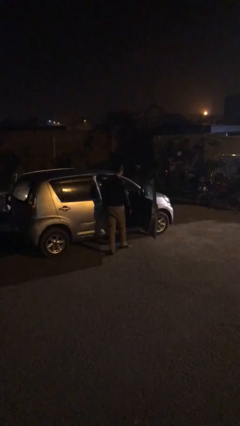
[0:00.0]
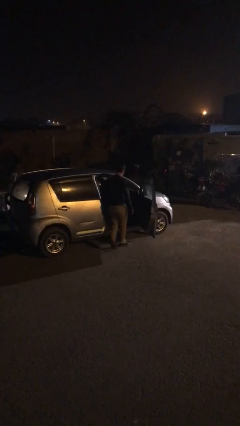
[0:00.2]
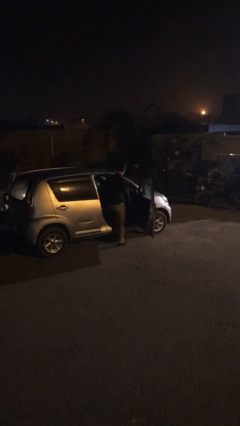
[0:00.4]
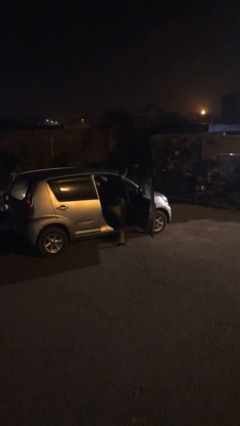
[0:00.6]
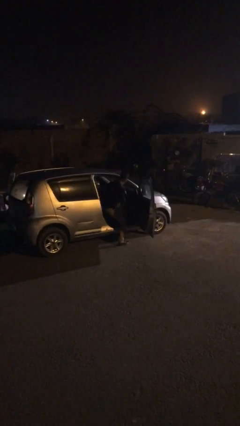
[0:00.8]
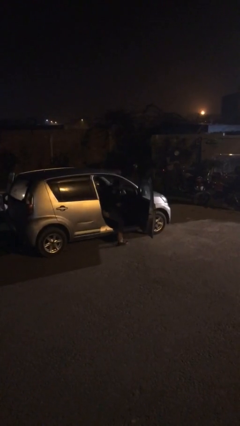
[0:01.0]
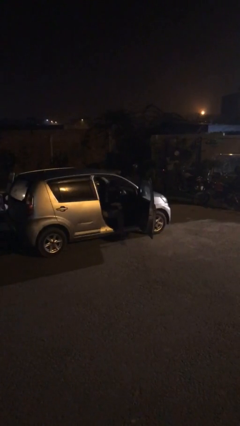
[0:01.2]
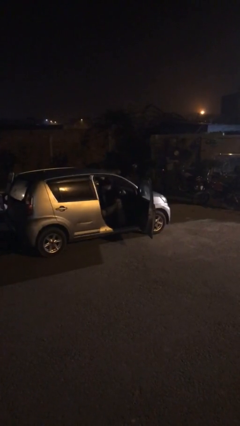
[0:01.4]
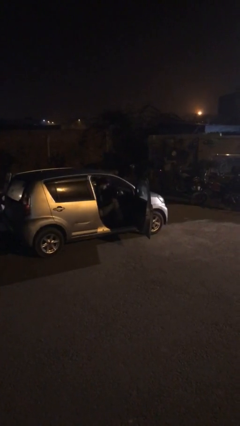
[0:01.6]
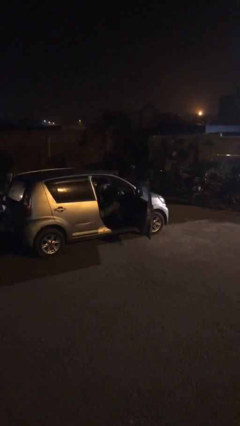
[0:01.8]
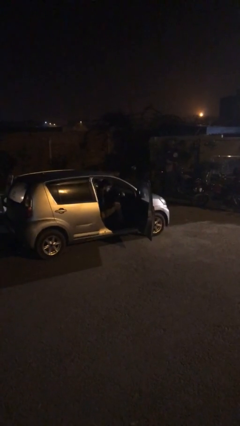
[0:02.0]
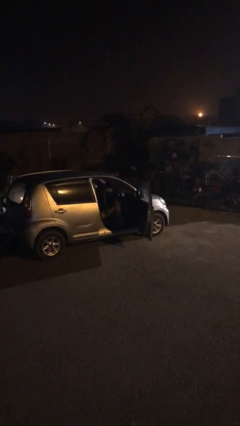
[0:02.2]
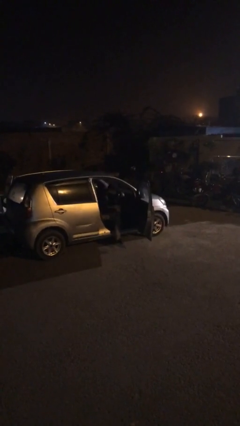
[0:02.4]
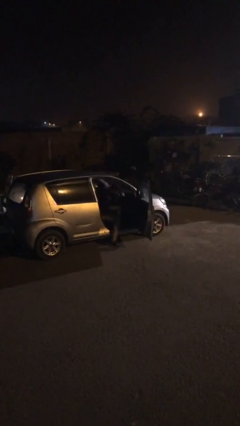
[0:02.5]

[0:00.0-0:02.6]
person enters car

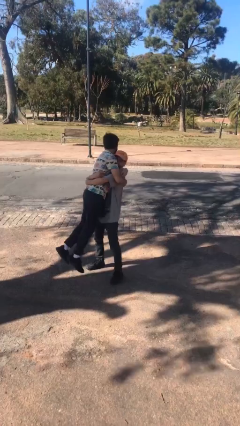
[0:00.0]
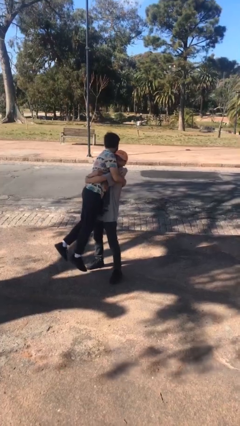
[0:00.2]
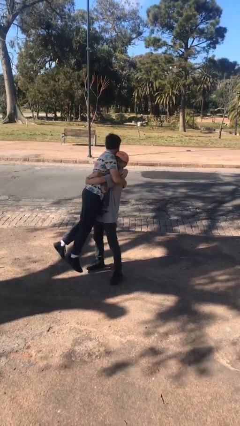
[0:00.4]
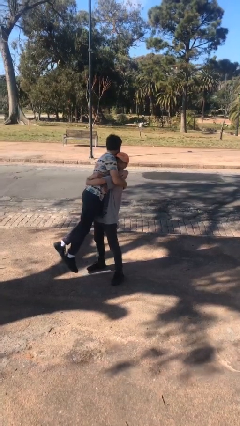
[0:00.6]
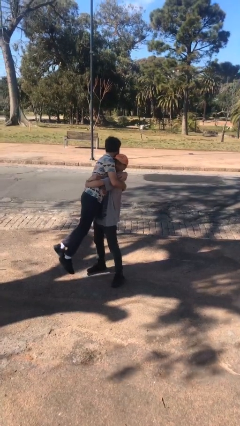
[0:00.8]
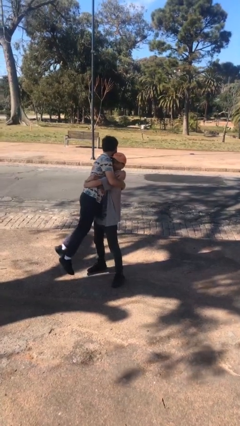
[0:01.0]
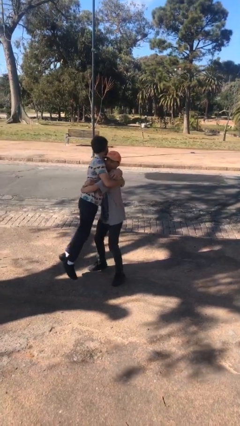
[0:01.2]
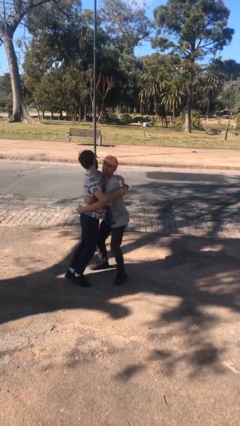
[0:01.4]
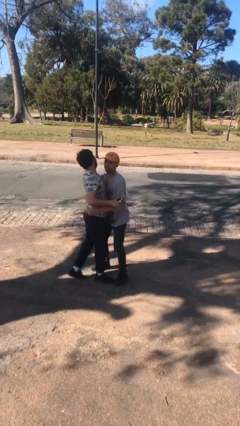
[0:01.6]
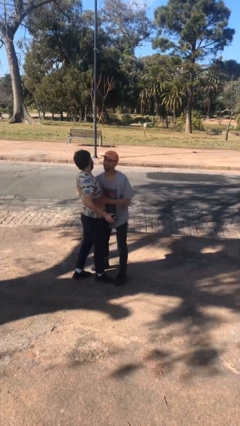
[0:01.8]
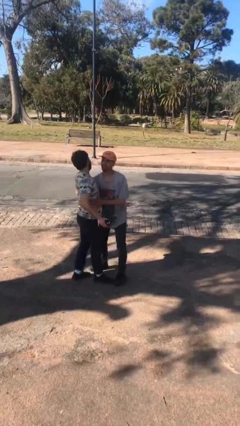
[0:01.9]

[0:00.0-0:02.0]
person puts down person

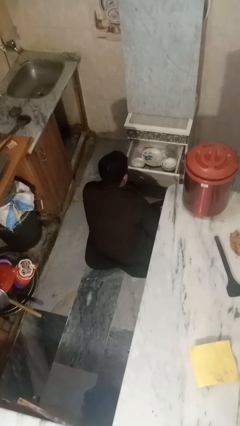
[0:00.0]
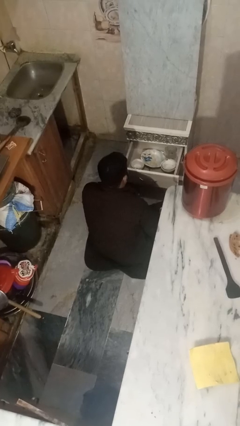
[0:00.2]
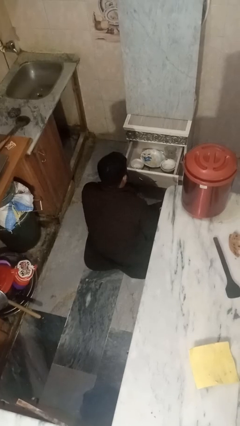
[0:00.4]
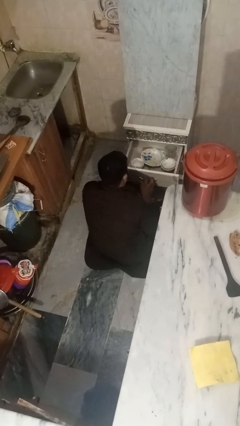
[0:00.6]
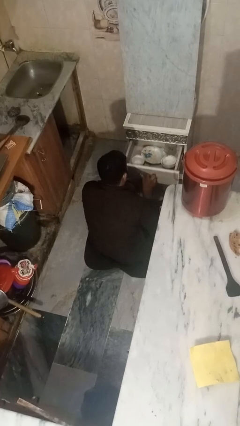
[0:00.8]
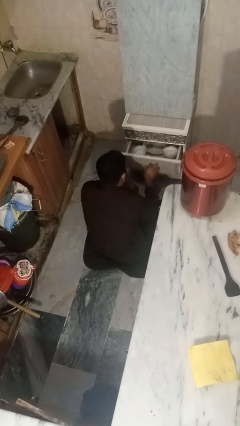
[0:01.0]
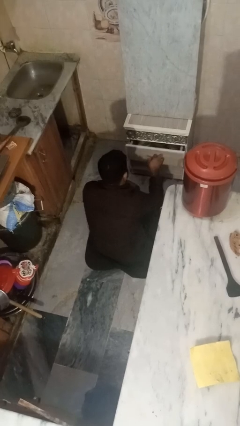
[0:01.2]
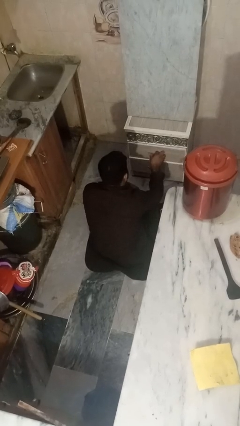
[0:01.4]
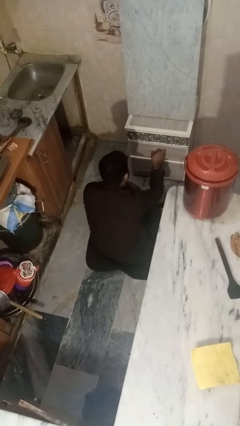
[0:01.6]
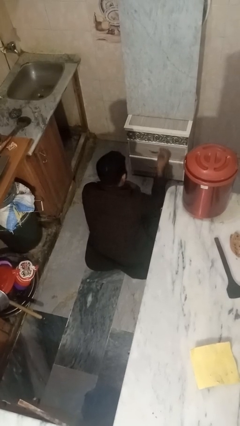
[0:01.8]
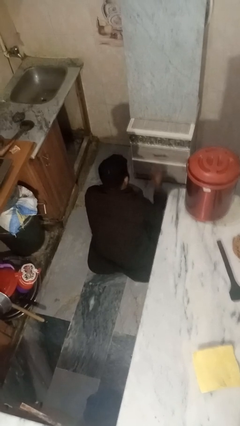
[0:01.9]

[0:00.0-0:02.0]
person closes kitchen drawer

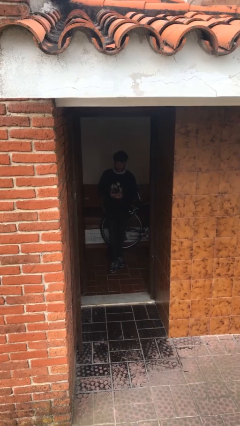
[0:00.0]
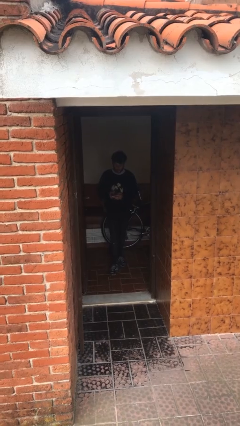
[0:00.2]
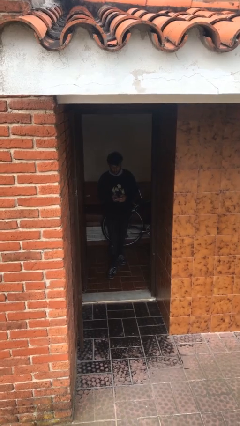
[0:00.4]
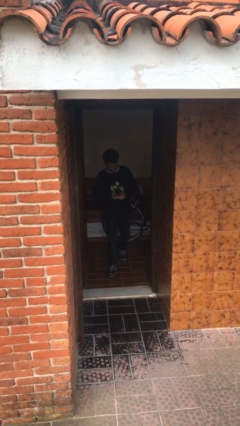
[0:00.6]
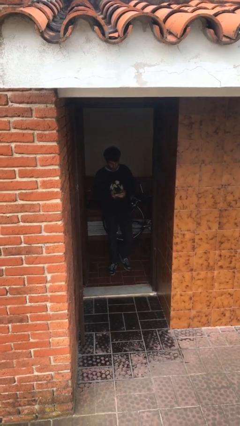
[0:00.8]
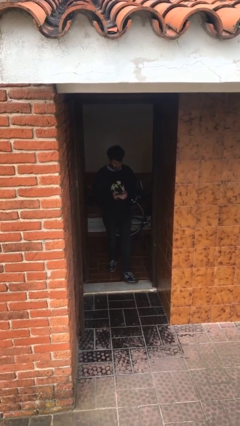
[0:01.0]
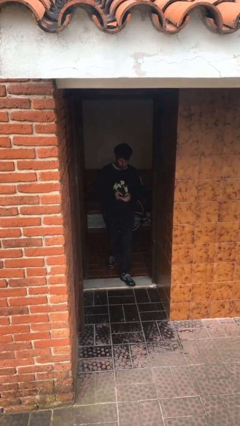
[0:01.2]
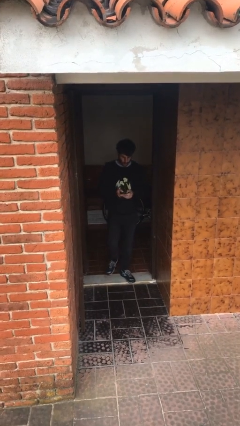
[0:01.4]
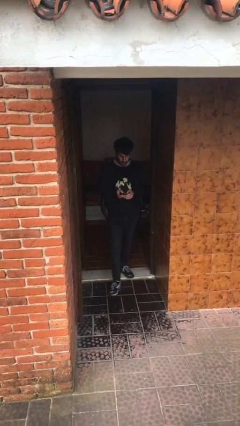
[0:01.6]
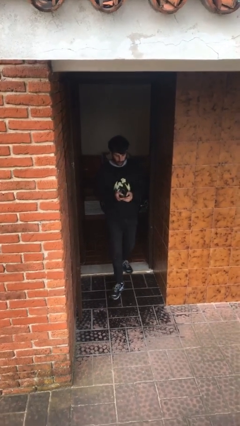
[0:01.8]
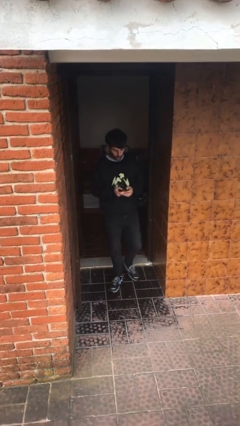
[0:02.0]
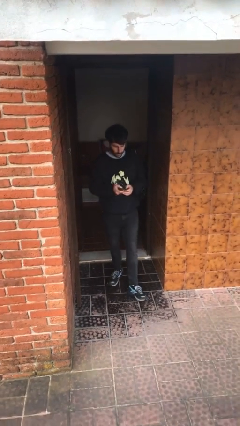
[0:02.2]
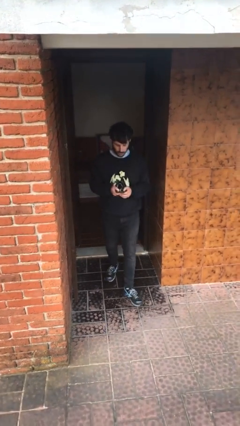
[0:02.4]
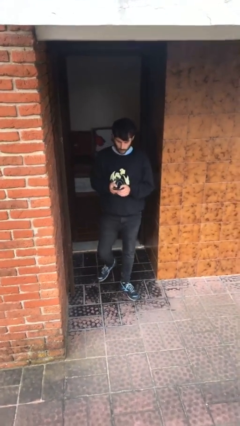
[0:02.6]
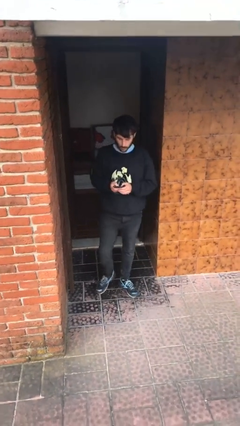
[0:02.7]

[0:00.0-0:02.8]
person enters scene through structure

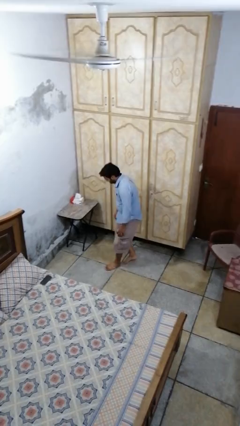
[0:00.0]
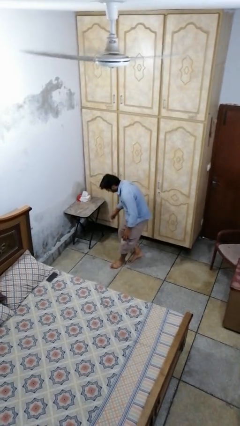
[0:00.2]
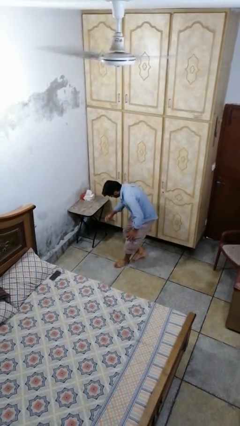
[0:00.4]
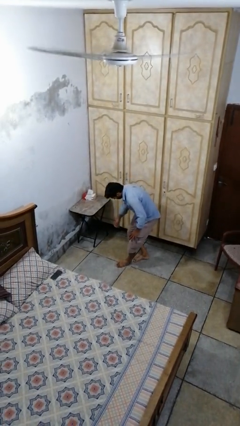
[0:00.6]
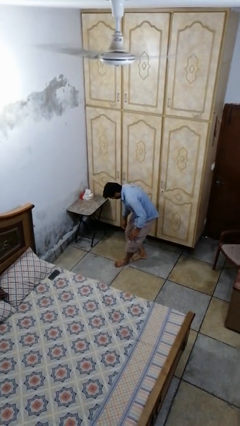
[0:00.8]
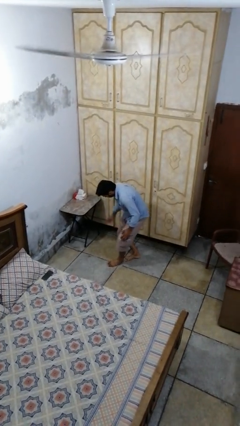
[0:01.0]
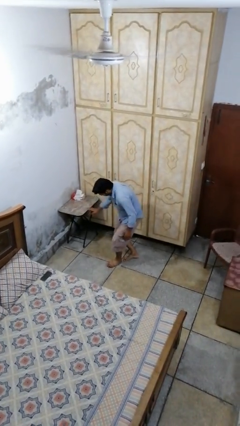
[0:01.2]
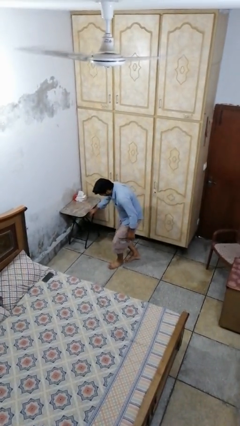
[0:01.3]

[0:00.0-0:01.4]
person stubs toe

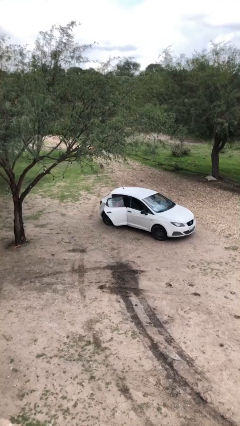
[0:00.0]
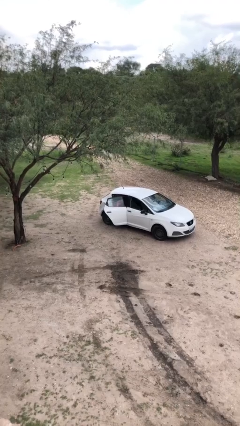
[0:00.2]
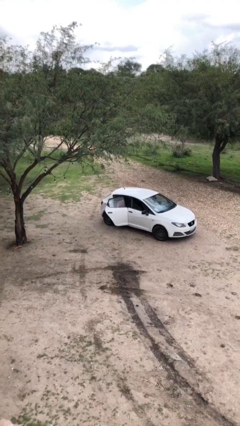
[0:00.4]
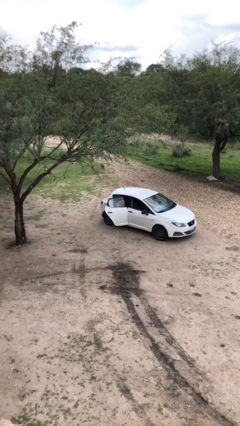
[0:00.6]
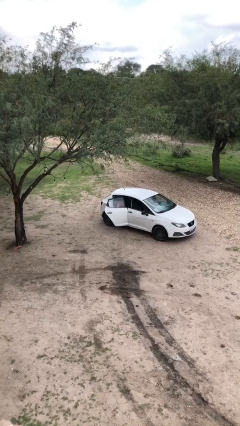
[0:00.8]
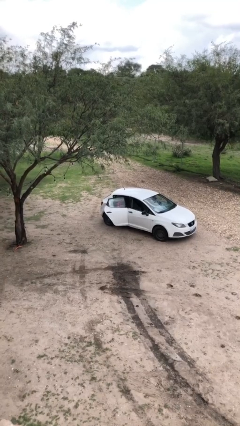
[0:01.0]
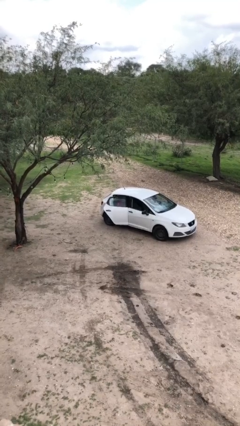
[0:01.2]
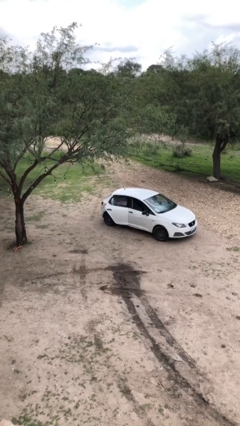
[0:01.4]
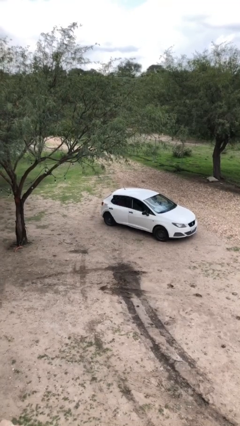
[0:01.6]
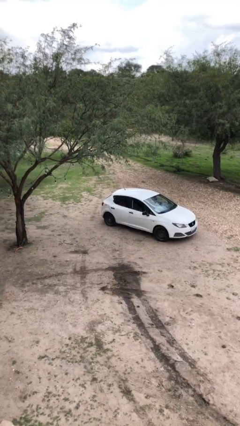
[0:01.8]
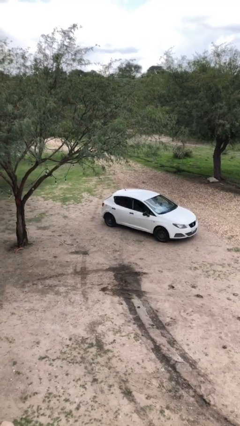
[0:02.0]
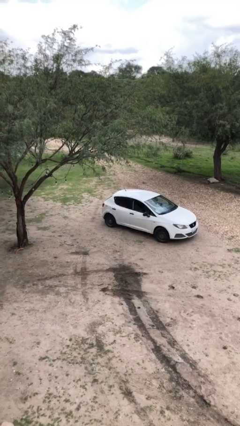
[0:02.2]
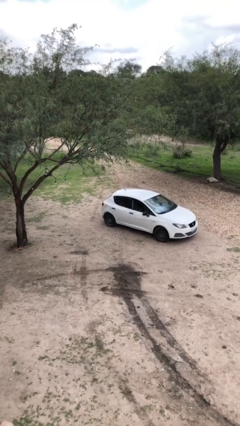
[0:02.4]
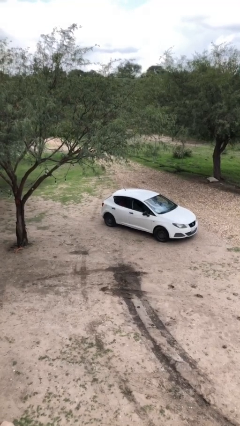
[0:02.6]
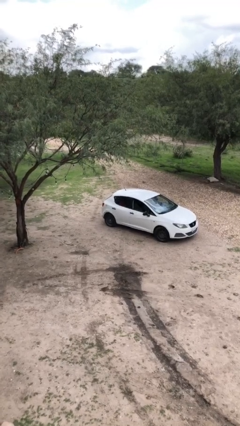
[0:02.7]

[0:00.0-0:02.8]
person closes car door

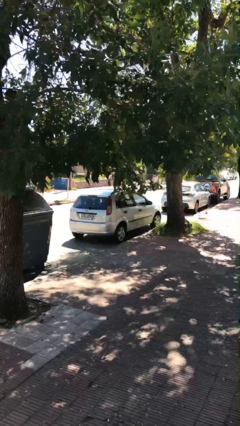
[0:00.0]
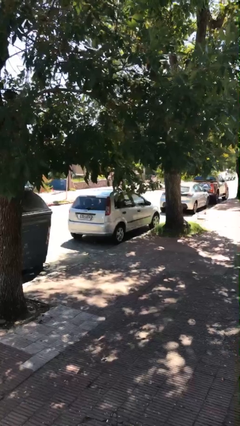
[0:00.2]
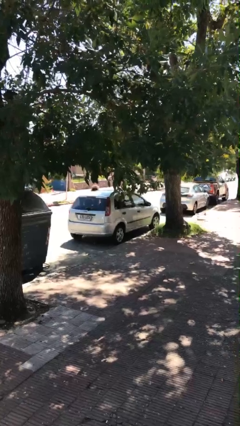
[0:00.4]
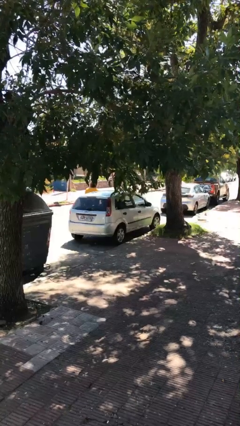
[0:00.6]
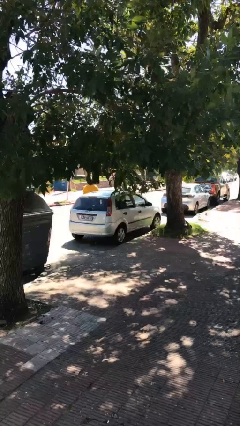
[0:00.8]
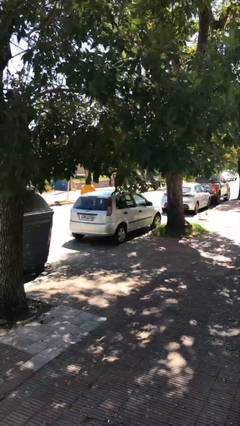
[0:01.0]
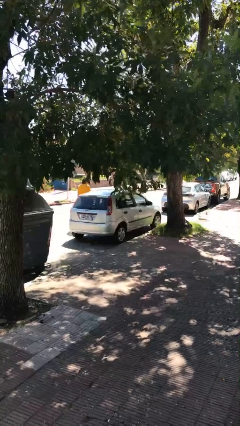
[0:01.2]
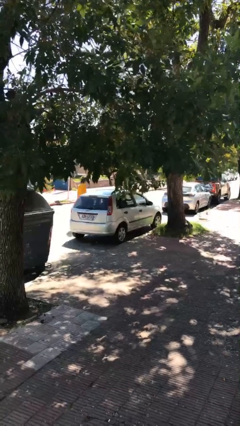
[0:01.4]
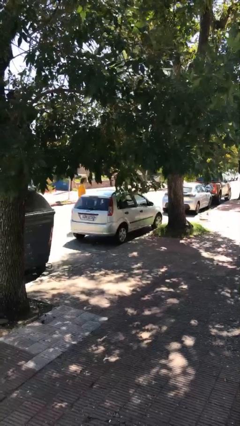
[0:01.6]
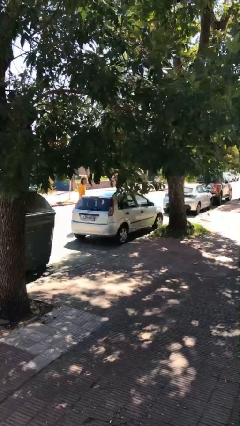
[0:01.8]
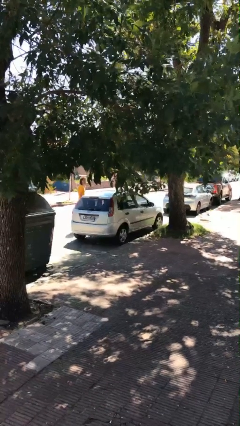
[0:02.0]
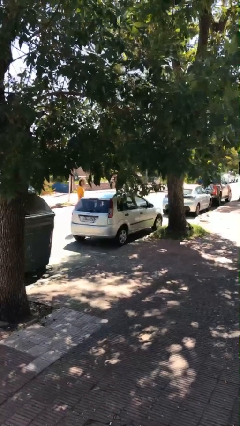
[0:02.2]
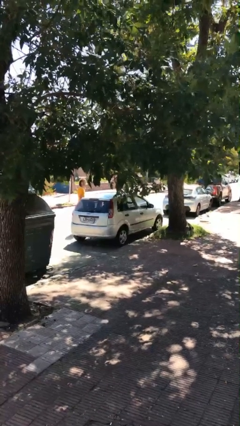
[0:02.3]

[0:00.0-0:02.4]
car drops off person

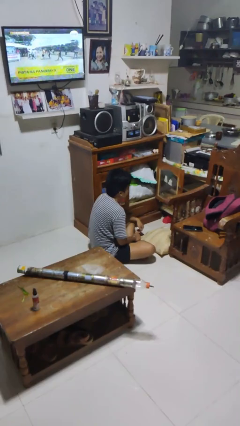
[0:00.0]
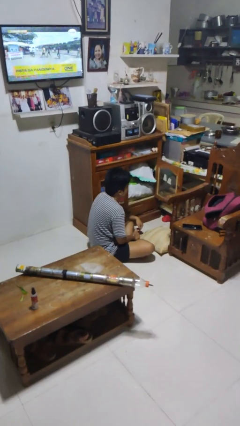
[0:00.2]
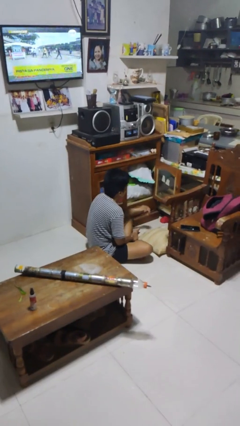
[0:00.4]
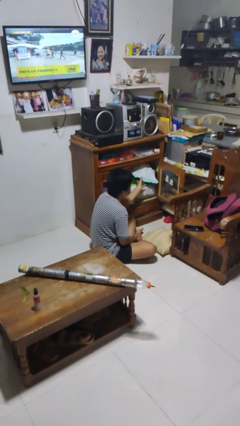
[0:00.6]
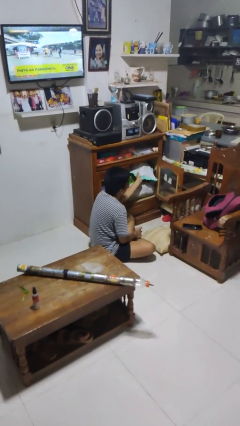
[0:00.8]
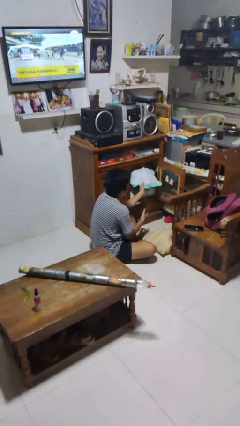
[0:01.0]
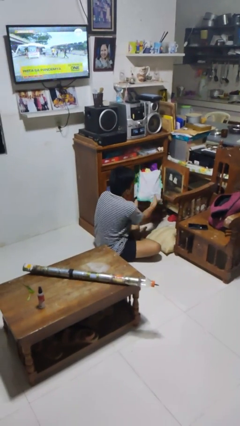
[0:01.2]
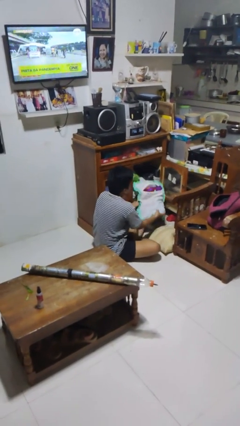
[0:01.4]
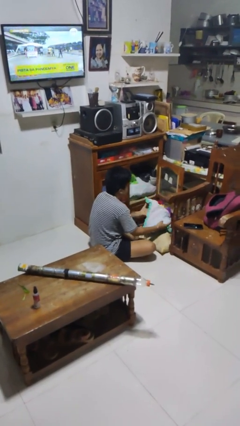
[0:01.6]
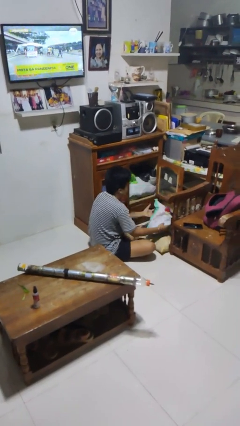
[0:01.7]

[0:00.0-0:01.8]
person puts clothes into dresser
